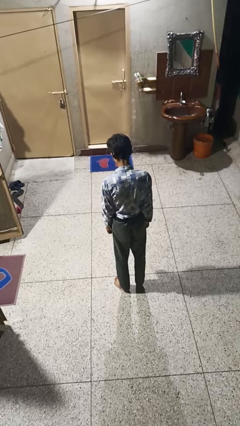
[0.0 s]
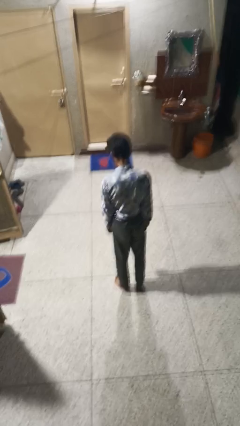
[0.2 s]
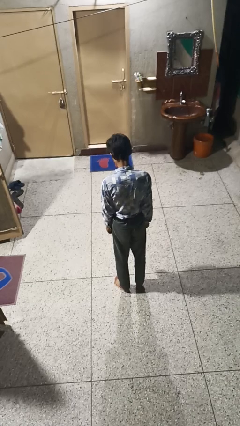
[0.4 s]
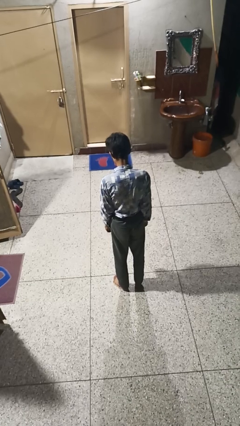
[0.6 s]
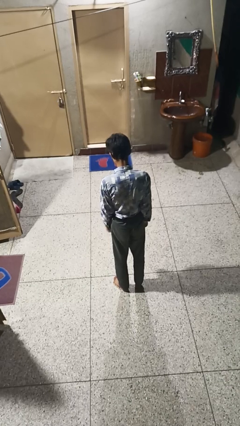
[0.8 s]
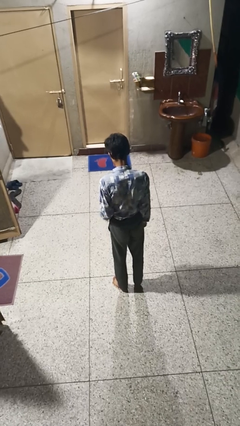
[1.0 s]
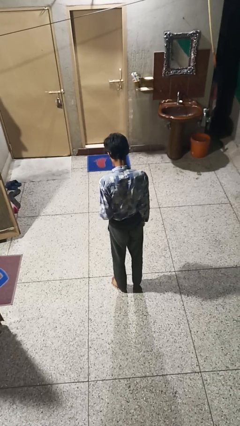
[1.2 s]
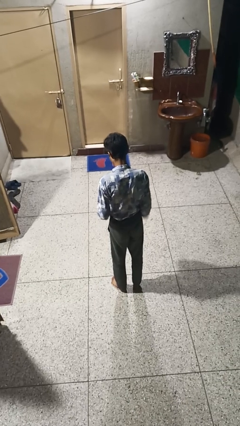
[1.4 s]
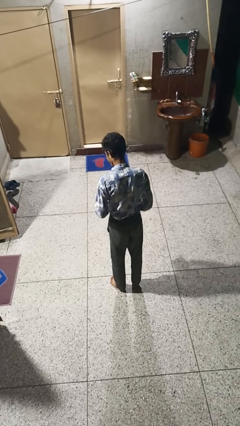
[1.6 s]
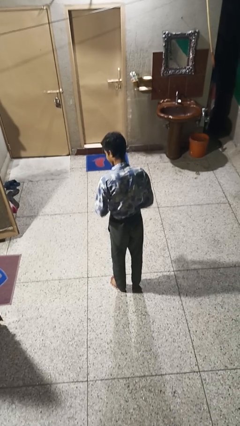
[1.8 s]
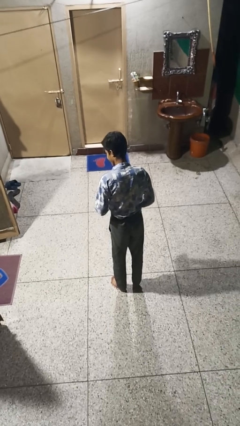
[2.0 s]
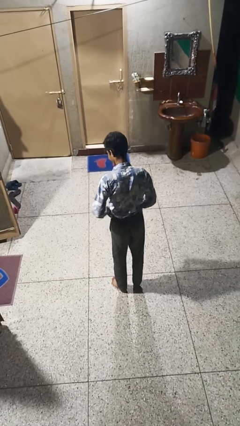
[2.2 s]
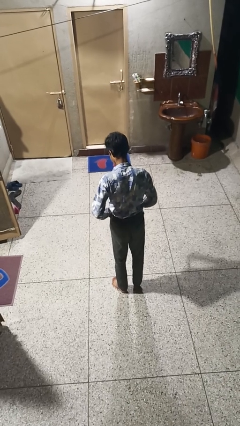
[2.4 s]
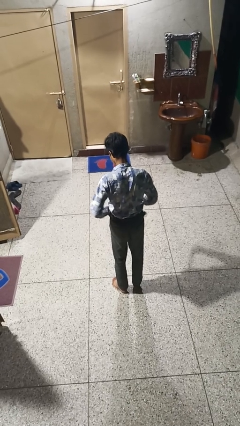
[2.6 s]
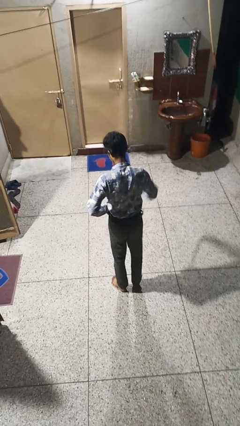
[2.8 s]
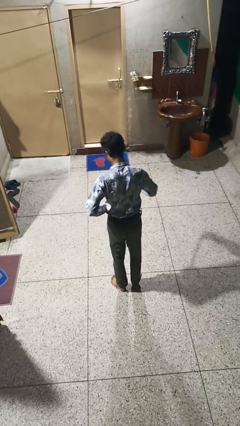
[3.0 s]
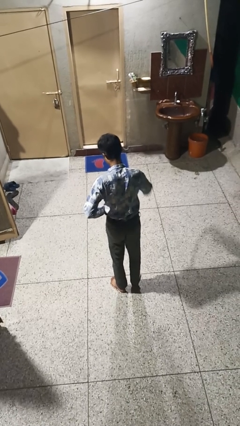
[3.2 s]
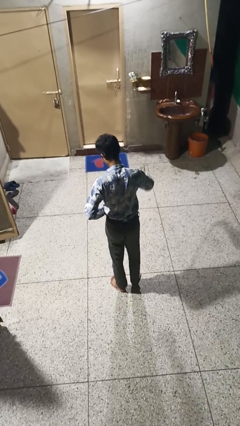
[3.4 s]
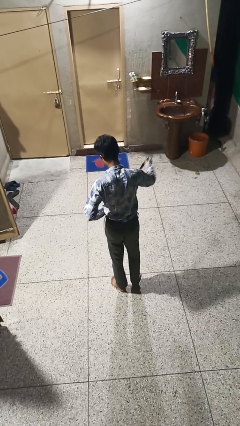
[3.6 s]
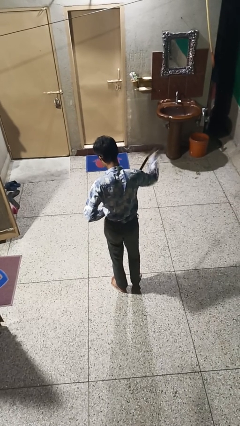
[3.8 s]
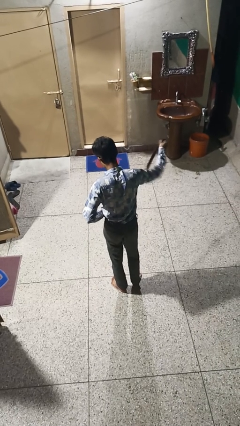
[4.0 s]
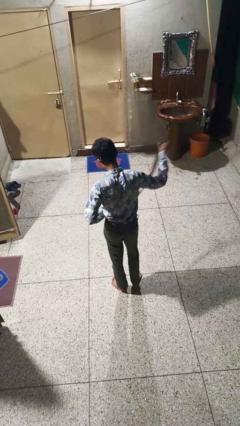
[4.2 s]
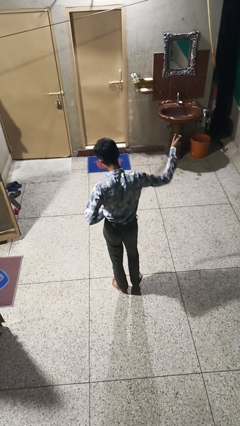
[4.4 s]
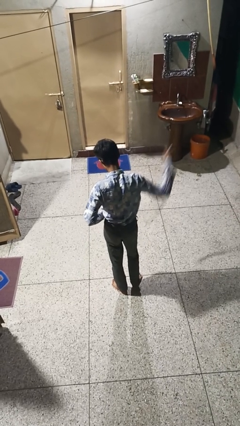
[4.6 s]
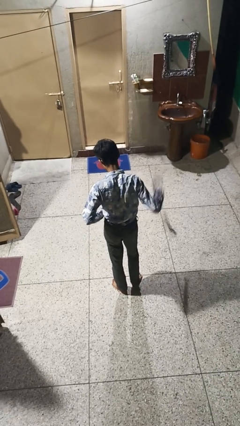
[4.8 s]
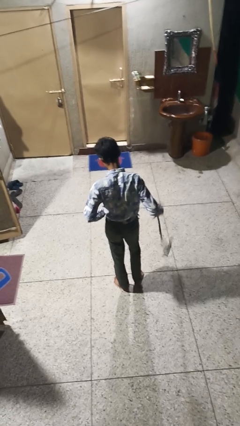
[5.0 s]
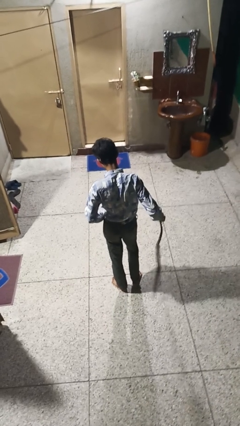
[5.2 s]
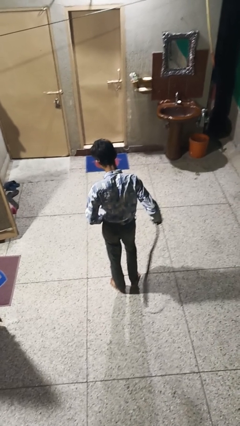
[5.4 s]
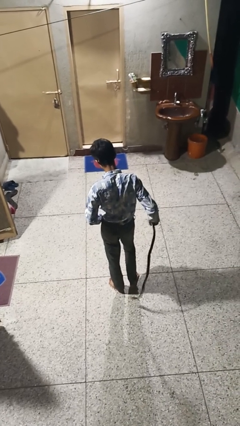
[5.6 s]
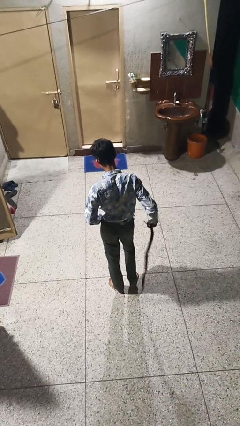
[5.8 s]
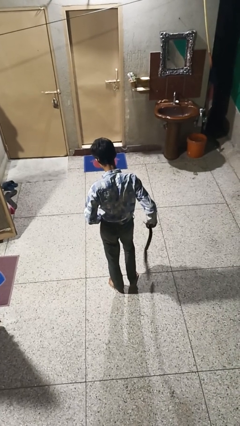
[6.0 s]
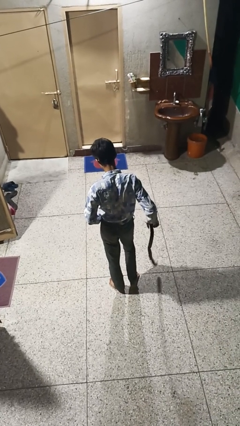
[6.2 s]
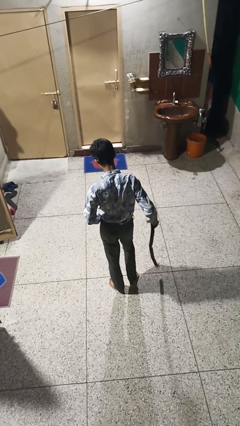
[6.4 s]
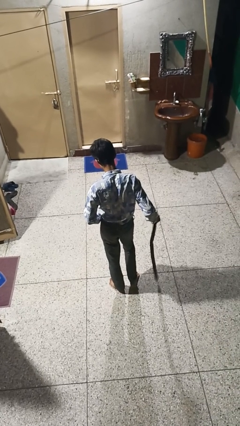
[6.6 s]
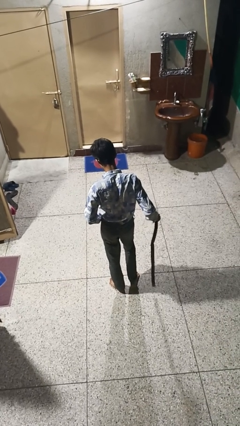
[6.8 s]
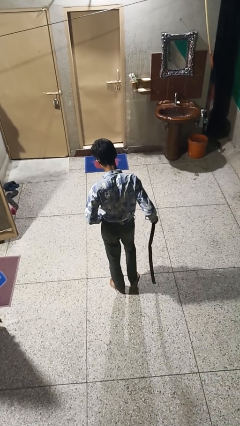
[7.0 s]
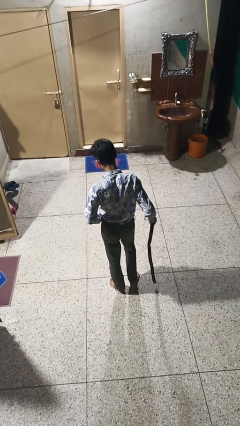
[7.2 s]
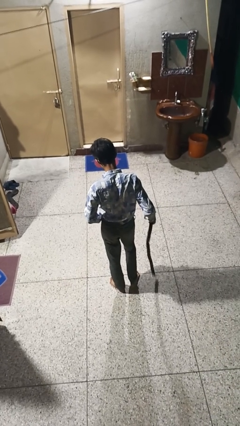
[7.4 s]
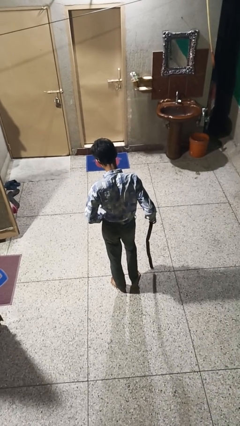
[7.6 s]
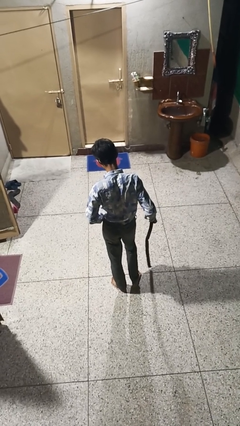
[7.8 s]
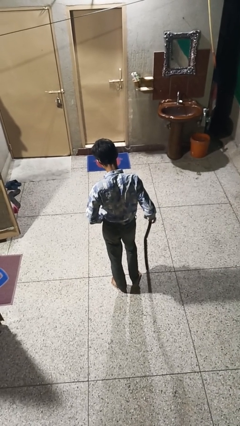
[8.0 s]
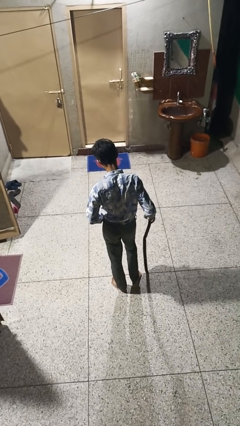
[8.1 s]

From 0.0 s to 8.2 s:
person takes off belt

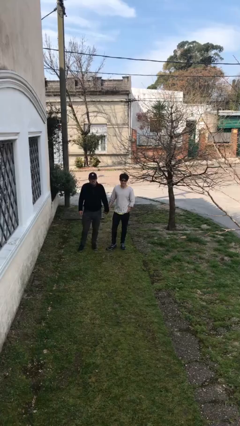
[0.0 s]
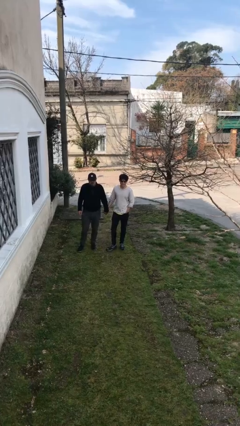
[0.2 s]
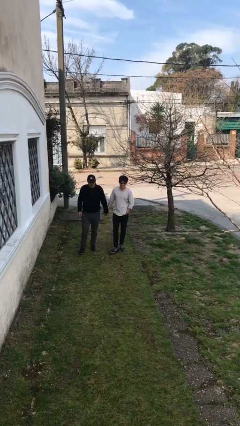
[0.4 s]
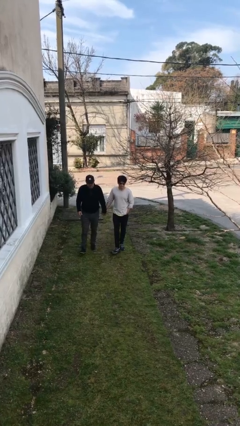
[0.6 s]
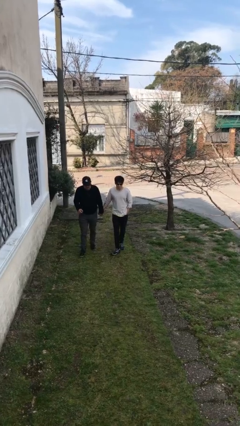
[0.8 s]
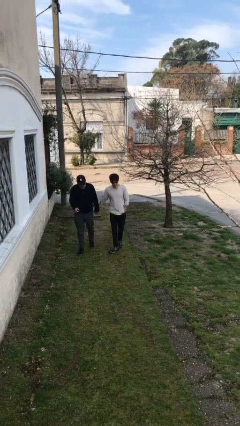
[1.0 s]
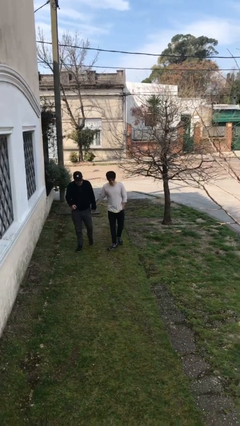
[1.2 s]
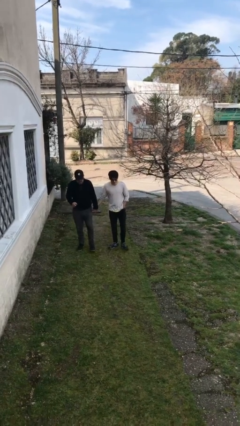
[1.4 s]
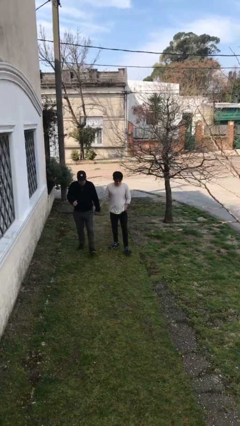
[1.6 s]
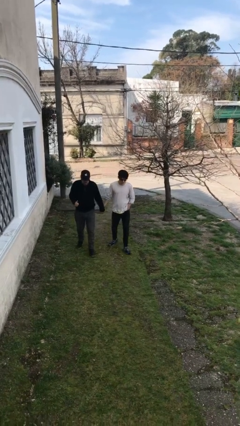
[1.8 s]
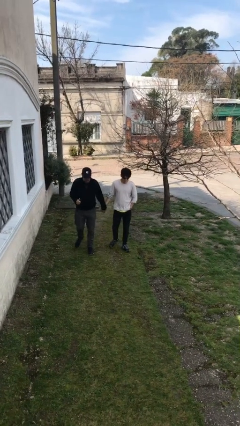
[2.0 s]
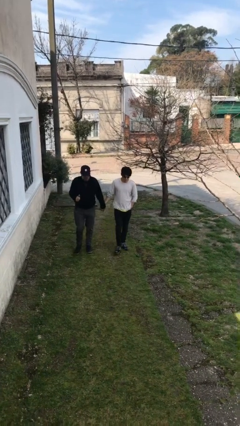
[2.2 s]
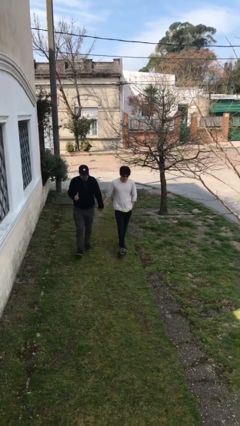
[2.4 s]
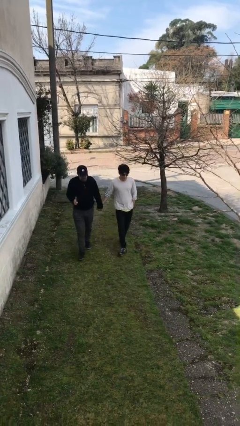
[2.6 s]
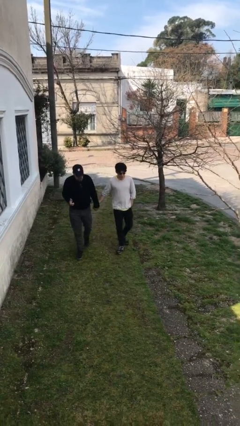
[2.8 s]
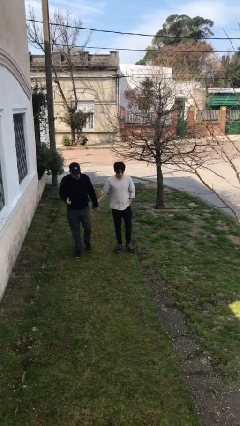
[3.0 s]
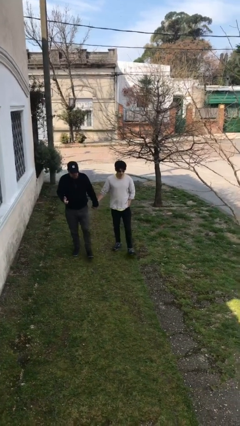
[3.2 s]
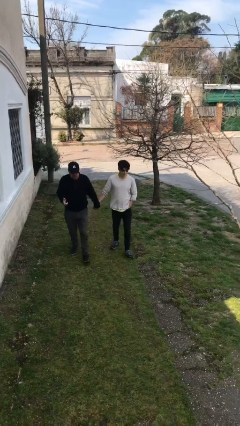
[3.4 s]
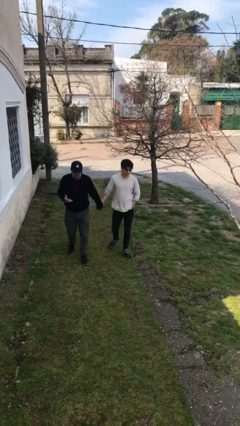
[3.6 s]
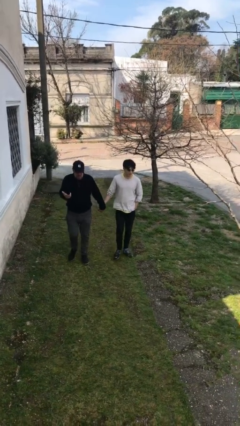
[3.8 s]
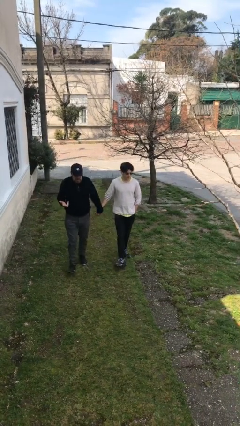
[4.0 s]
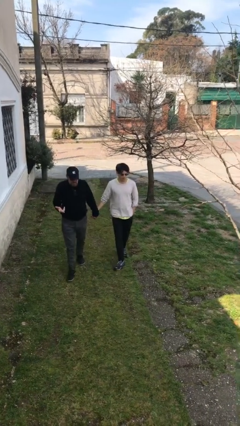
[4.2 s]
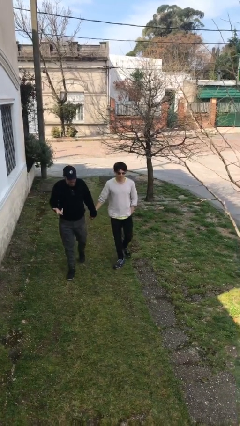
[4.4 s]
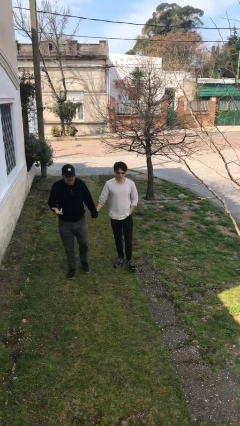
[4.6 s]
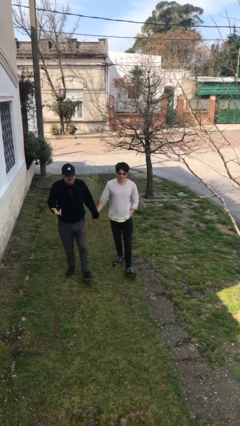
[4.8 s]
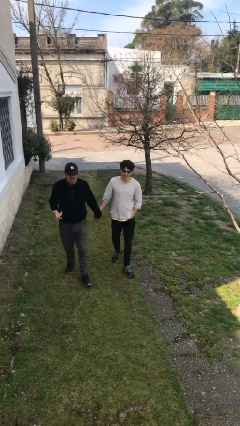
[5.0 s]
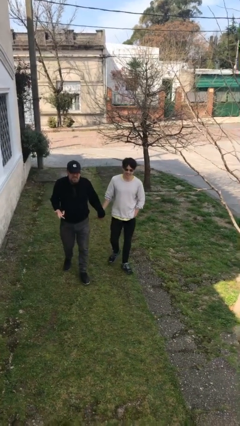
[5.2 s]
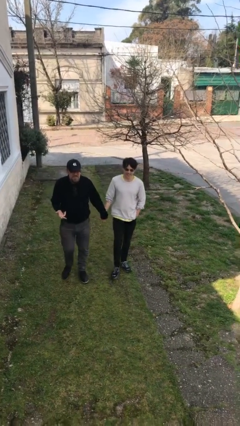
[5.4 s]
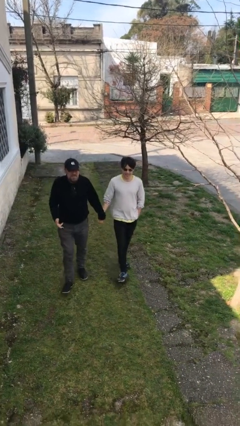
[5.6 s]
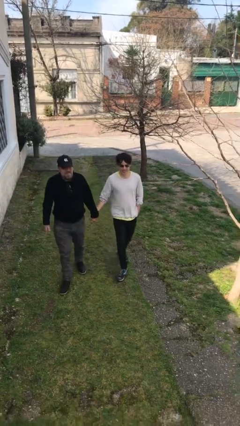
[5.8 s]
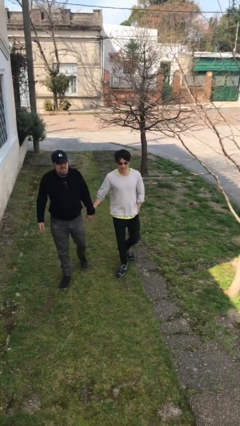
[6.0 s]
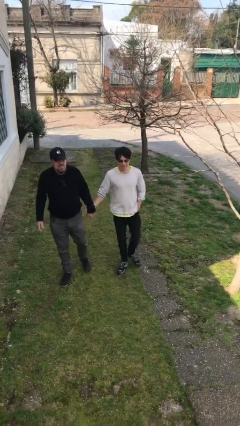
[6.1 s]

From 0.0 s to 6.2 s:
person holds hand

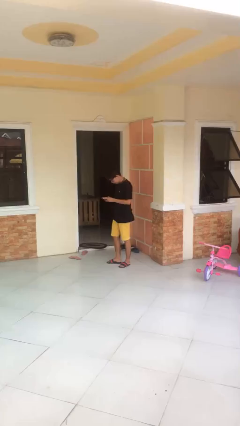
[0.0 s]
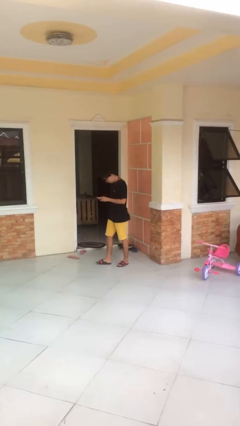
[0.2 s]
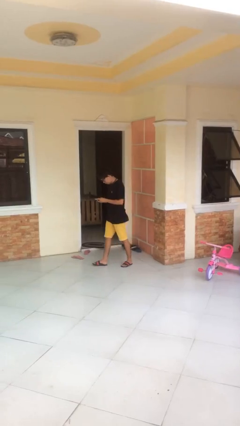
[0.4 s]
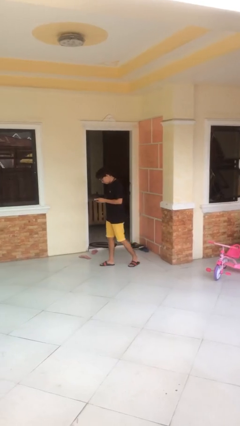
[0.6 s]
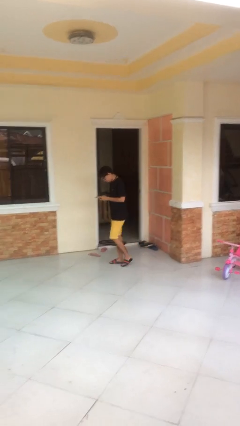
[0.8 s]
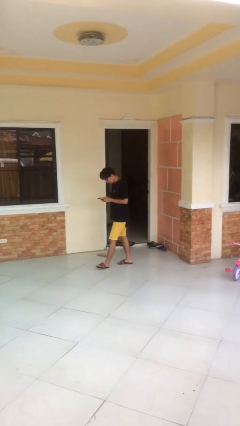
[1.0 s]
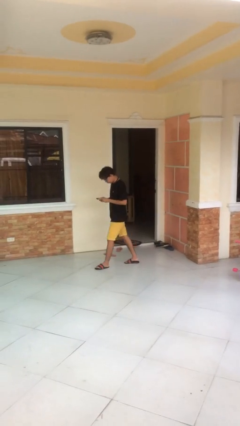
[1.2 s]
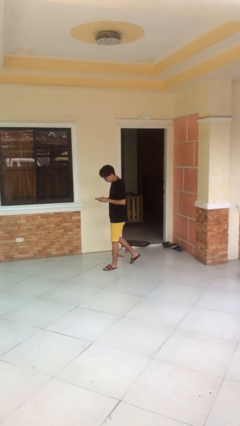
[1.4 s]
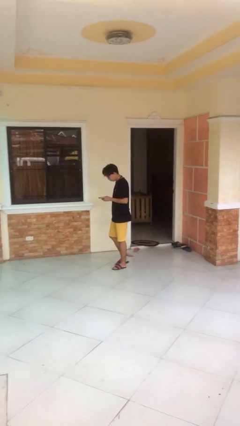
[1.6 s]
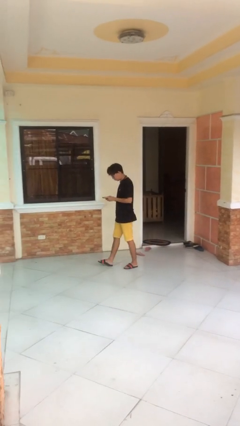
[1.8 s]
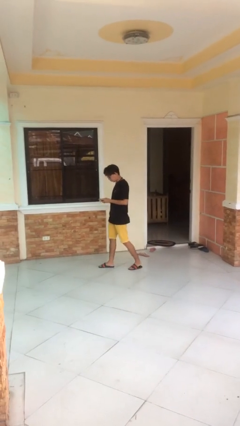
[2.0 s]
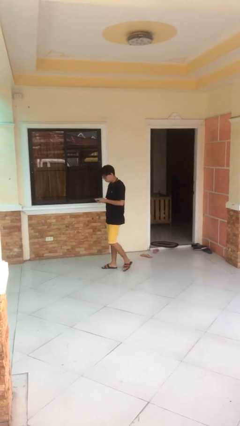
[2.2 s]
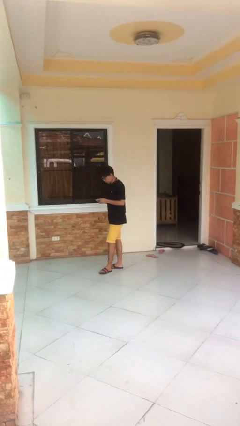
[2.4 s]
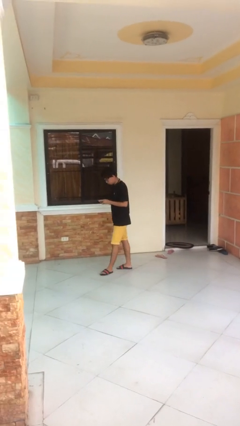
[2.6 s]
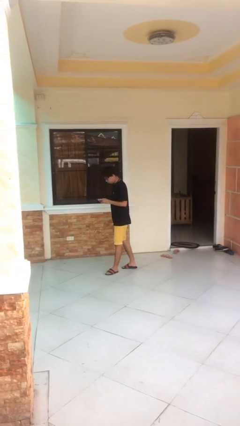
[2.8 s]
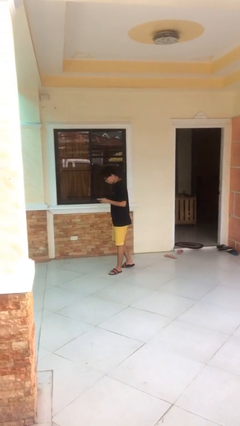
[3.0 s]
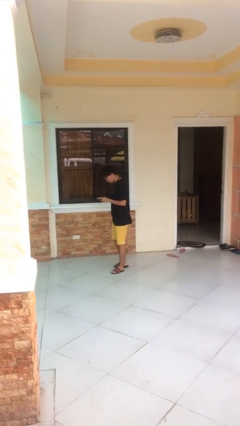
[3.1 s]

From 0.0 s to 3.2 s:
person texts on phone

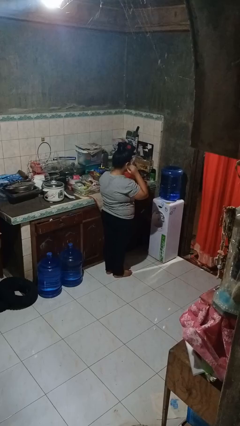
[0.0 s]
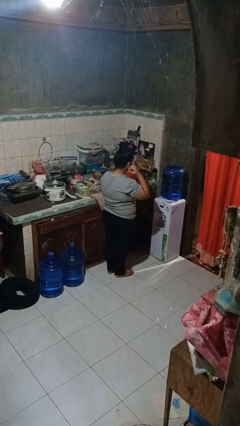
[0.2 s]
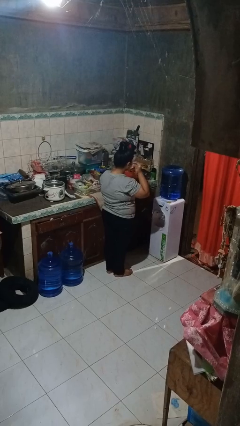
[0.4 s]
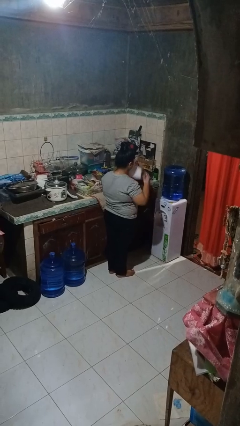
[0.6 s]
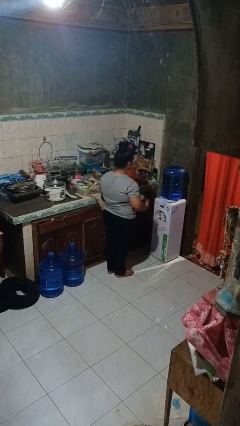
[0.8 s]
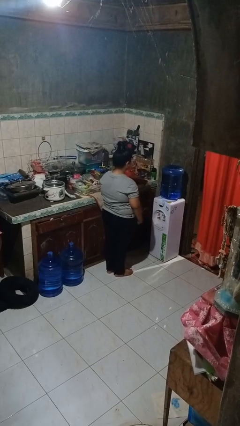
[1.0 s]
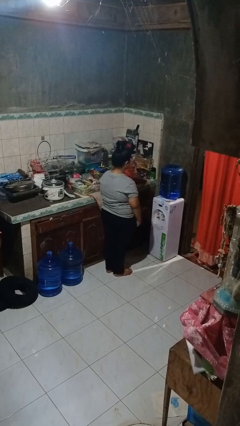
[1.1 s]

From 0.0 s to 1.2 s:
person takes off facemask
